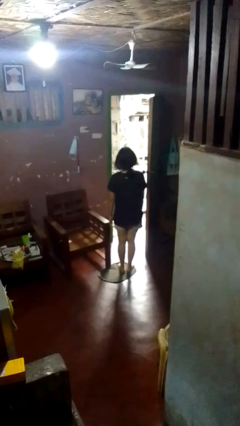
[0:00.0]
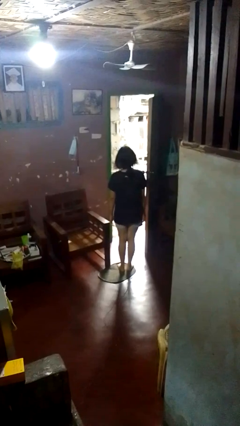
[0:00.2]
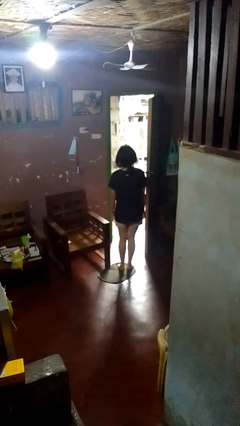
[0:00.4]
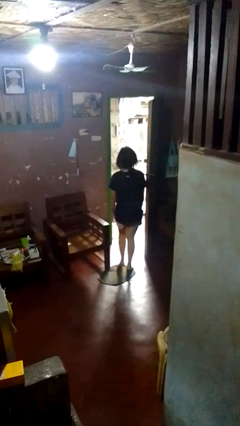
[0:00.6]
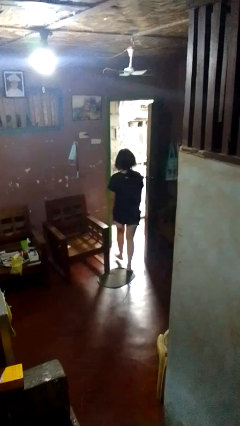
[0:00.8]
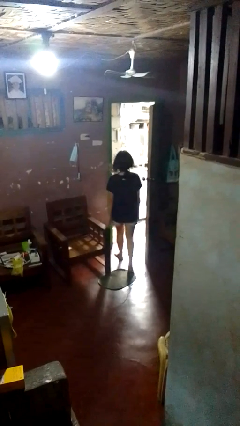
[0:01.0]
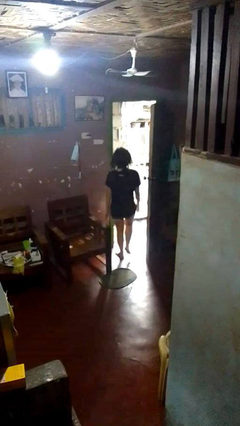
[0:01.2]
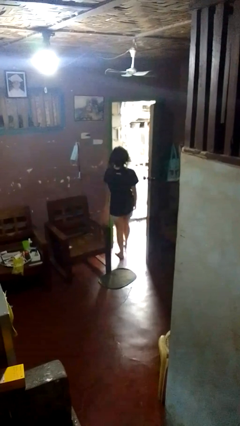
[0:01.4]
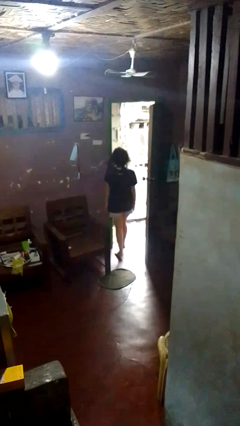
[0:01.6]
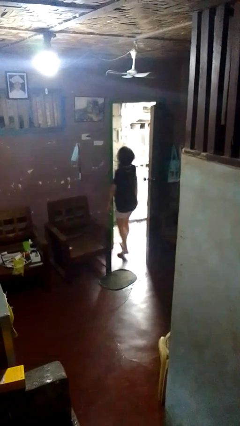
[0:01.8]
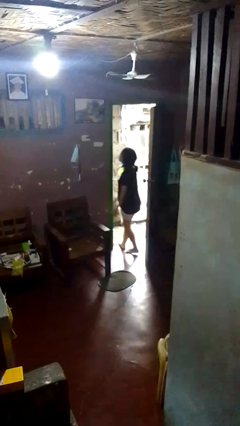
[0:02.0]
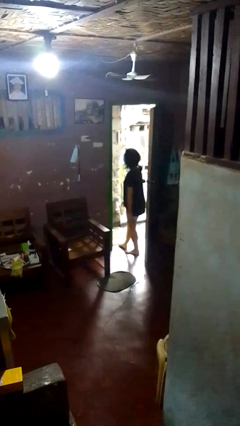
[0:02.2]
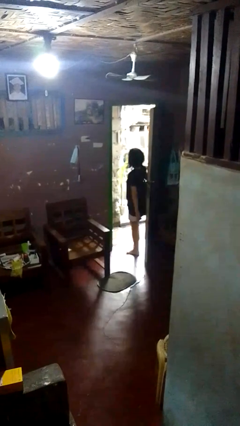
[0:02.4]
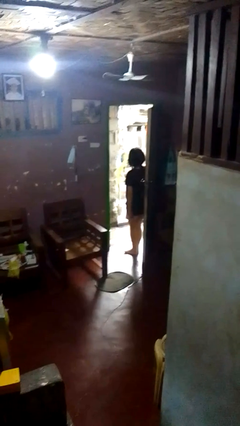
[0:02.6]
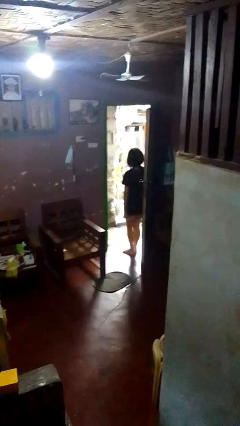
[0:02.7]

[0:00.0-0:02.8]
person bumps into wall

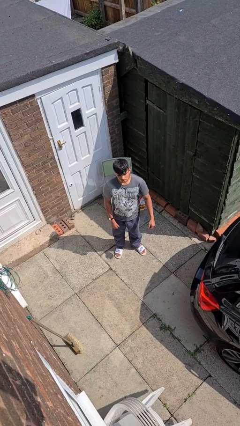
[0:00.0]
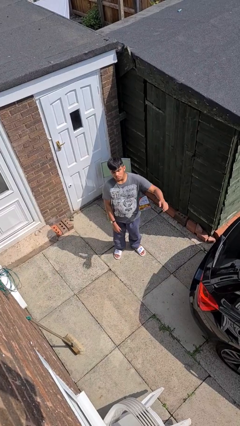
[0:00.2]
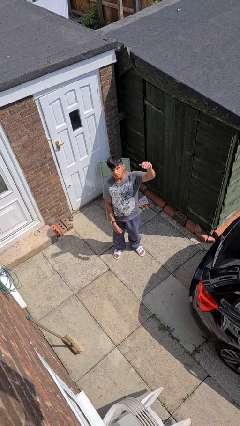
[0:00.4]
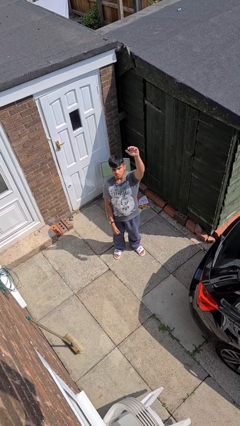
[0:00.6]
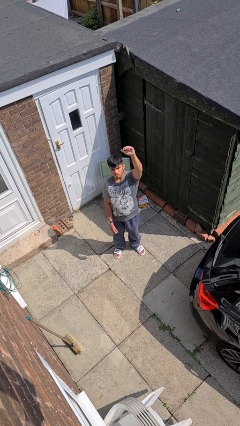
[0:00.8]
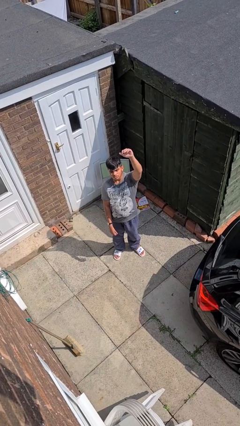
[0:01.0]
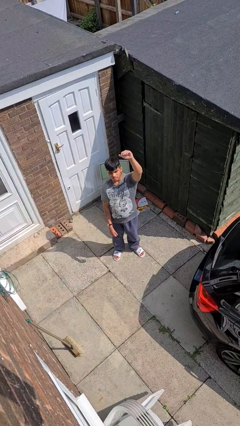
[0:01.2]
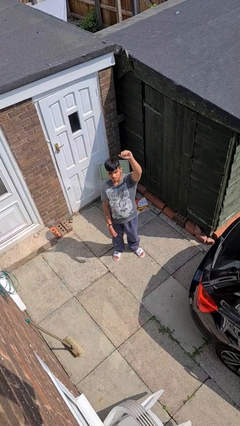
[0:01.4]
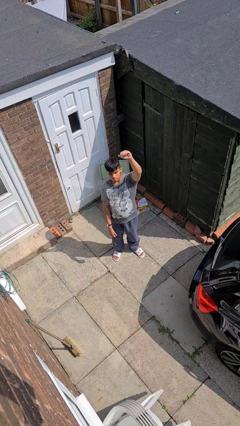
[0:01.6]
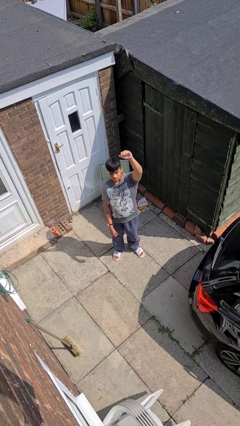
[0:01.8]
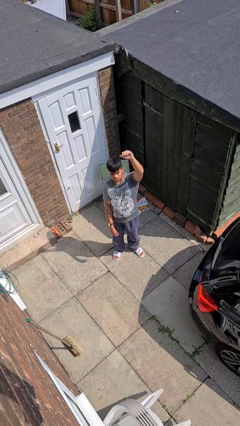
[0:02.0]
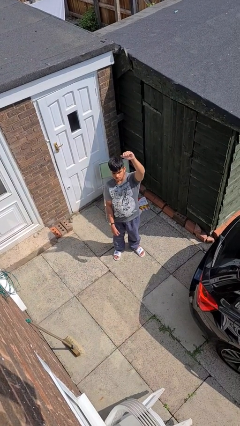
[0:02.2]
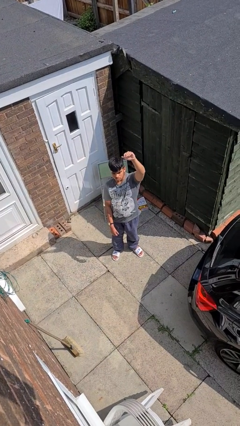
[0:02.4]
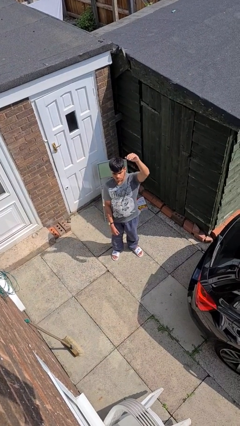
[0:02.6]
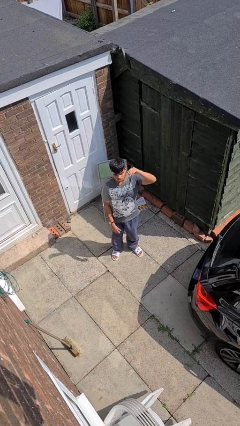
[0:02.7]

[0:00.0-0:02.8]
person gestures raise hand

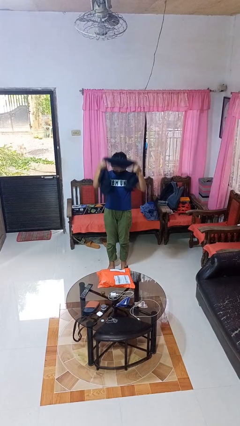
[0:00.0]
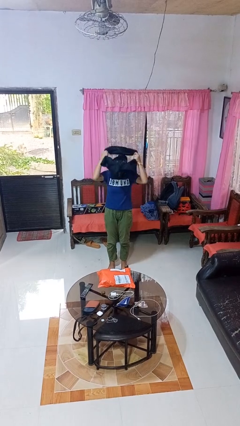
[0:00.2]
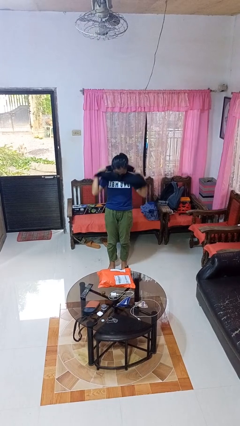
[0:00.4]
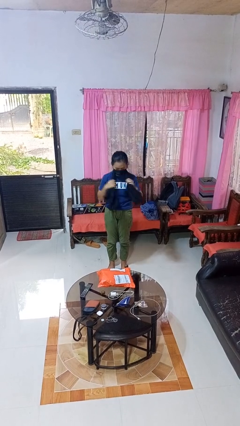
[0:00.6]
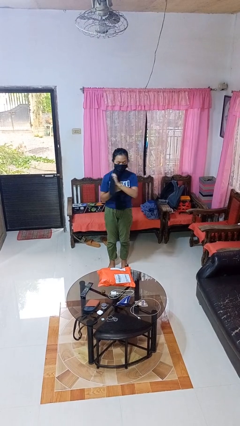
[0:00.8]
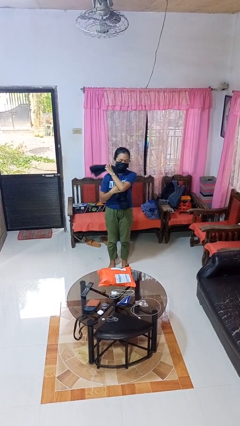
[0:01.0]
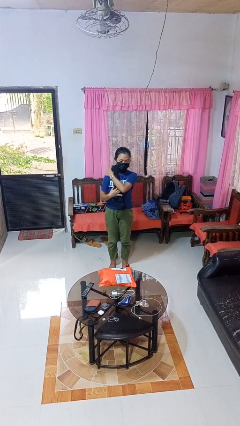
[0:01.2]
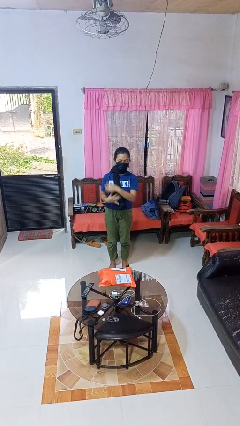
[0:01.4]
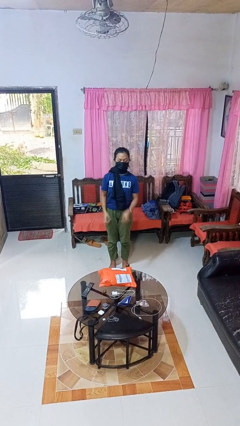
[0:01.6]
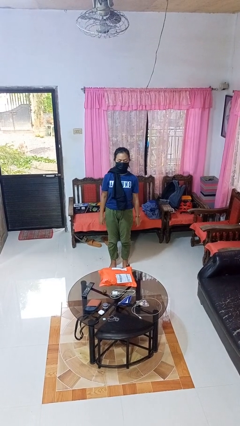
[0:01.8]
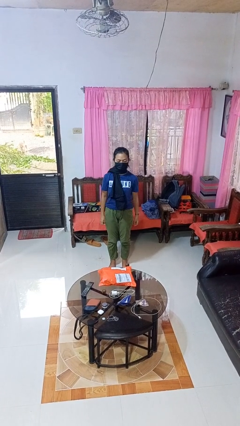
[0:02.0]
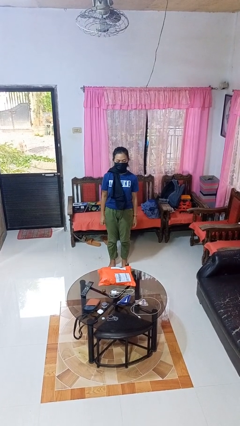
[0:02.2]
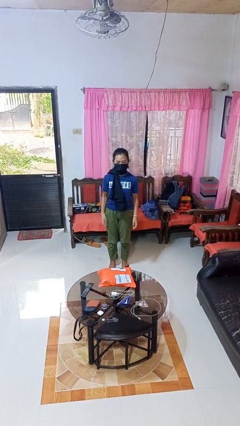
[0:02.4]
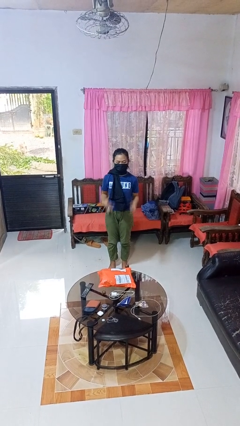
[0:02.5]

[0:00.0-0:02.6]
person puts on scarf

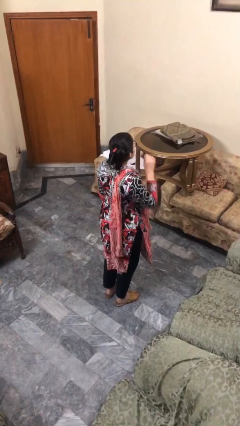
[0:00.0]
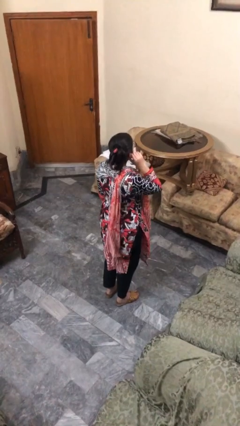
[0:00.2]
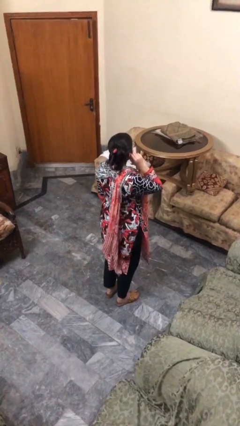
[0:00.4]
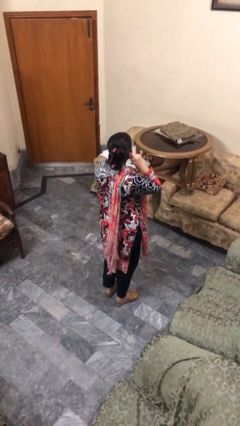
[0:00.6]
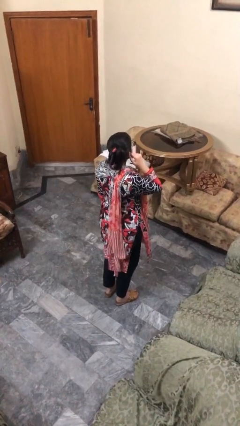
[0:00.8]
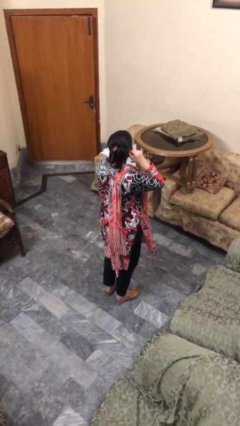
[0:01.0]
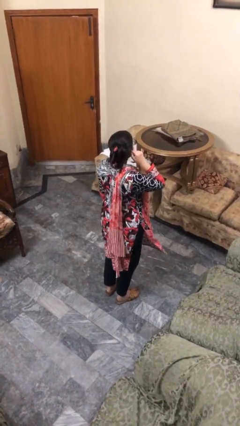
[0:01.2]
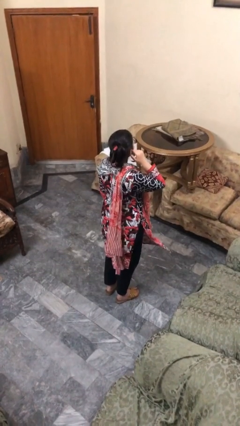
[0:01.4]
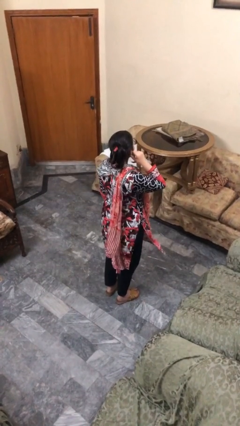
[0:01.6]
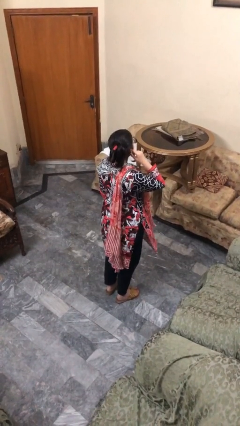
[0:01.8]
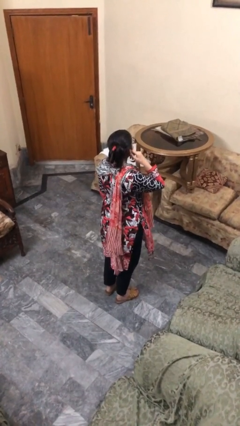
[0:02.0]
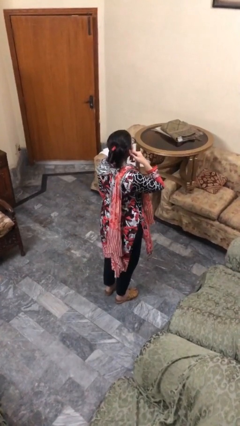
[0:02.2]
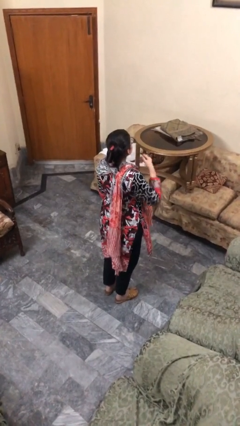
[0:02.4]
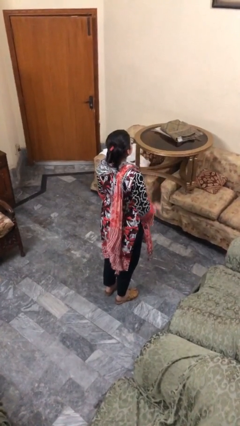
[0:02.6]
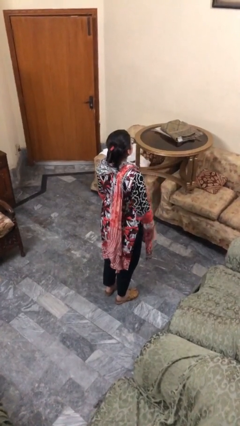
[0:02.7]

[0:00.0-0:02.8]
person touches earlobe

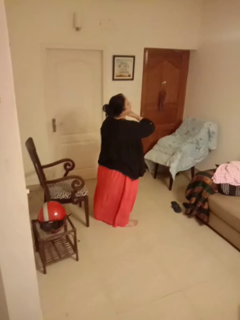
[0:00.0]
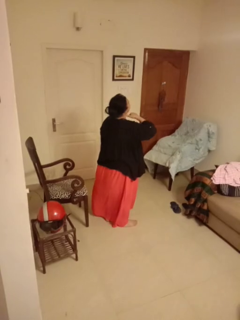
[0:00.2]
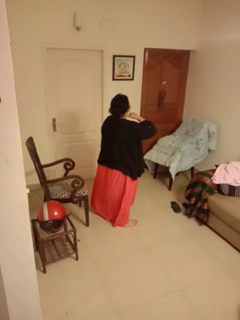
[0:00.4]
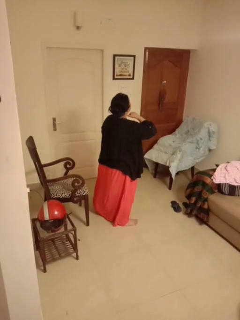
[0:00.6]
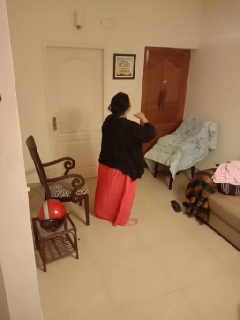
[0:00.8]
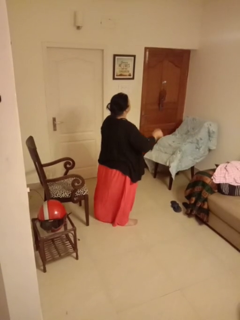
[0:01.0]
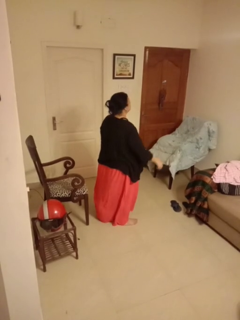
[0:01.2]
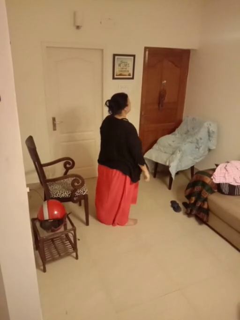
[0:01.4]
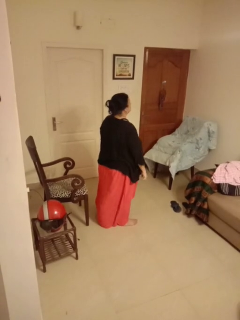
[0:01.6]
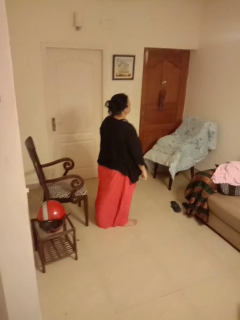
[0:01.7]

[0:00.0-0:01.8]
person gestures cut

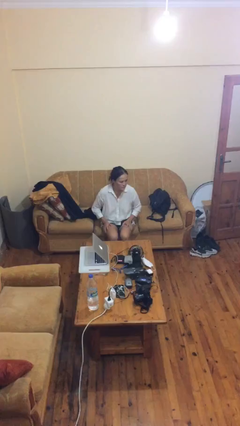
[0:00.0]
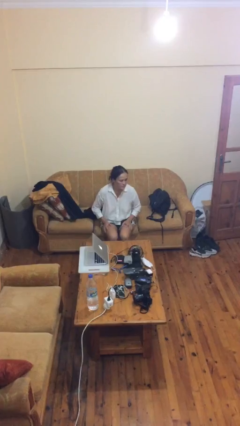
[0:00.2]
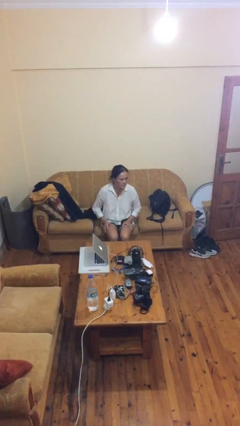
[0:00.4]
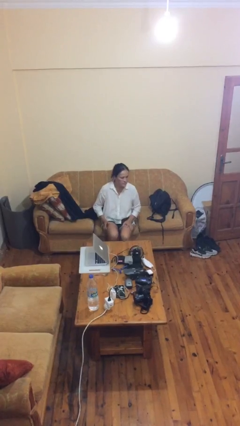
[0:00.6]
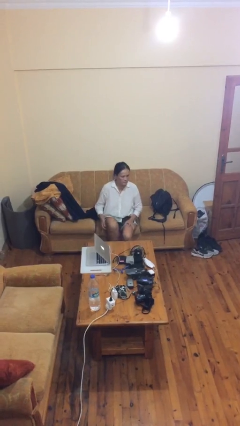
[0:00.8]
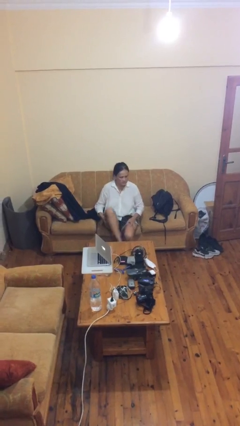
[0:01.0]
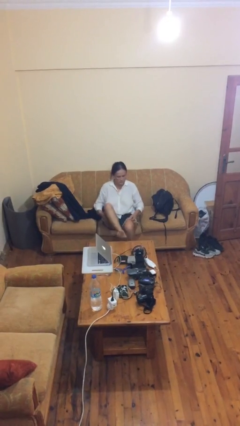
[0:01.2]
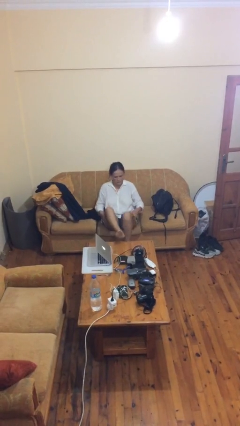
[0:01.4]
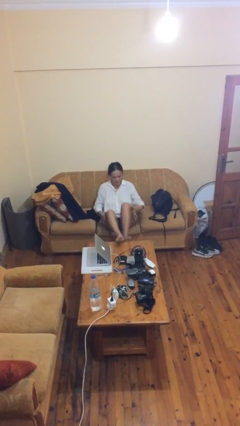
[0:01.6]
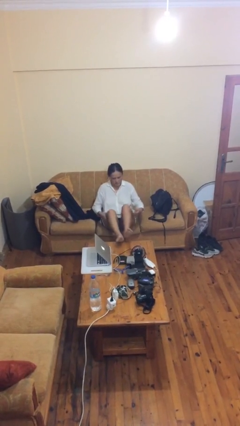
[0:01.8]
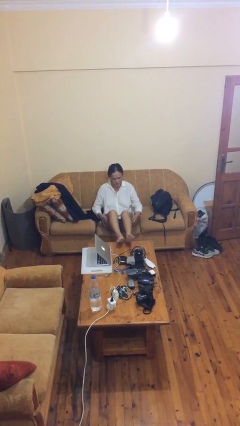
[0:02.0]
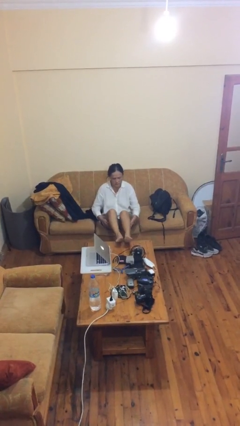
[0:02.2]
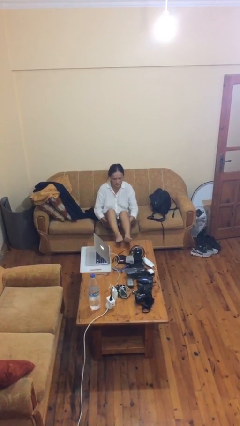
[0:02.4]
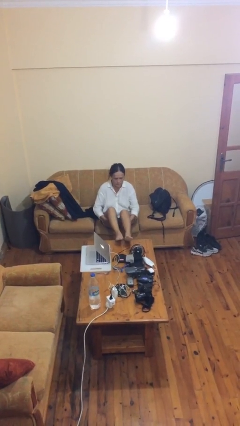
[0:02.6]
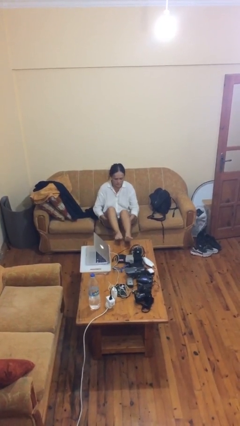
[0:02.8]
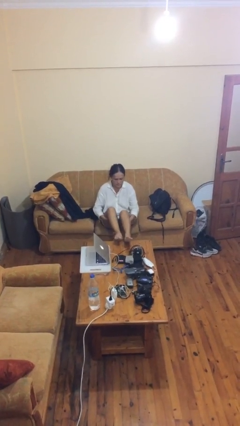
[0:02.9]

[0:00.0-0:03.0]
person puts feet up

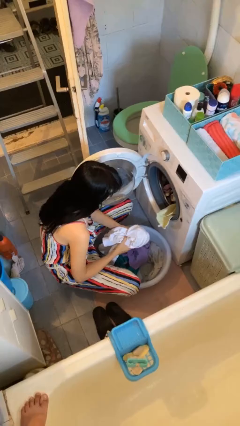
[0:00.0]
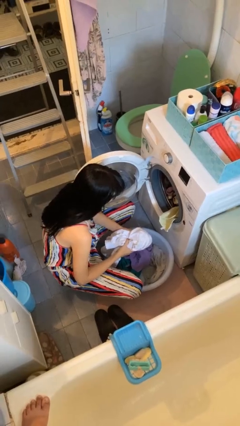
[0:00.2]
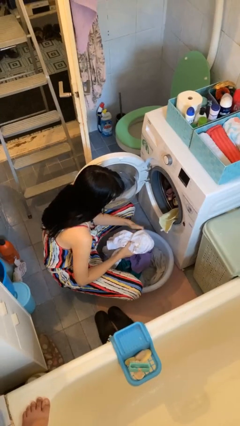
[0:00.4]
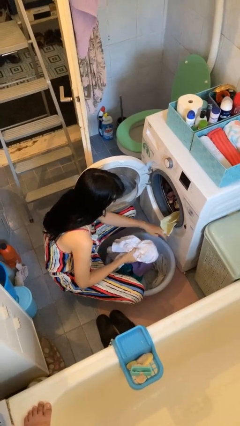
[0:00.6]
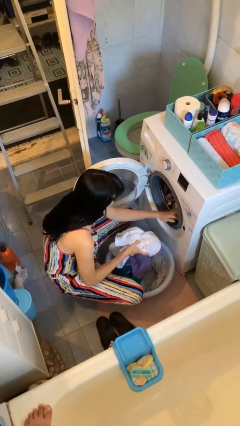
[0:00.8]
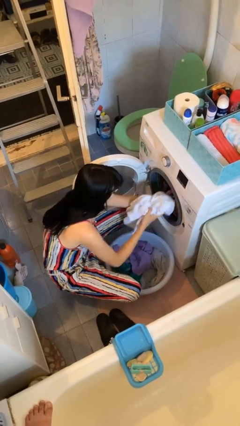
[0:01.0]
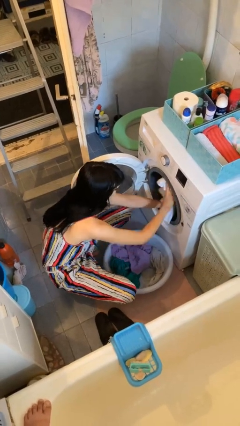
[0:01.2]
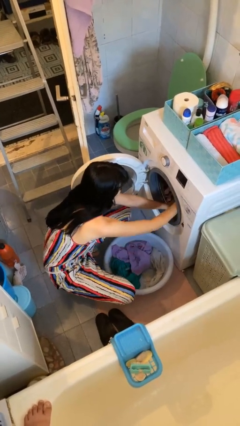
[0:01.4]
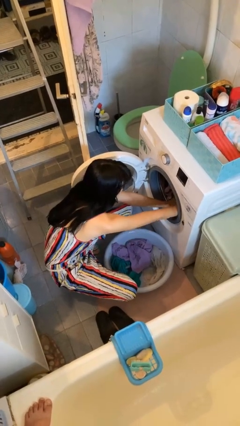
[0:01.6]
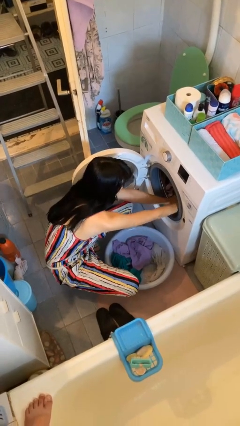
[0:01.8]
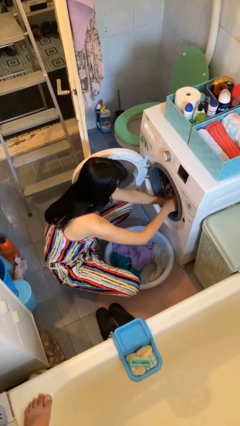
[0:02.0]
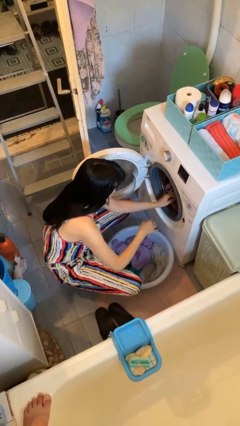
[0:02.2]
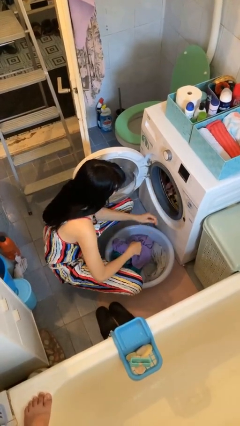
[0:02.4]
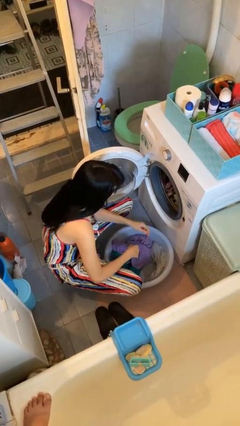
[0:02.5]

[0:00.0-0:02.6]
person unloads clotheswasher
